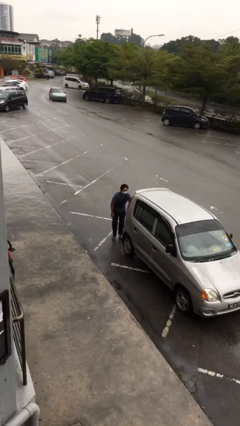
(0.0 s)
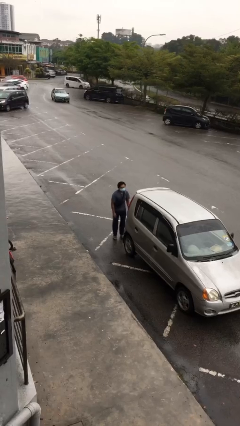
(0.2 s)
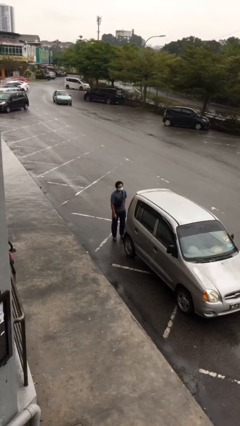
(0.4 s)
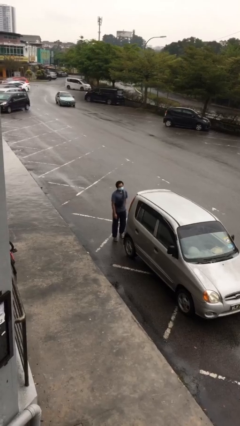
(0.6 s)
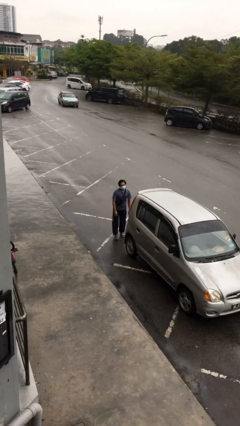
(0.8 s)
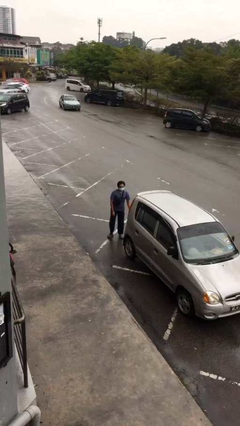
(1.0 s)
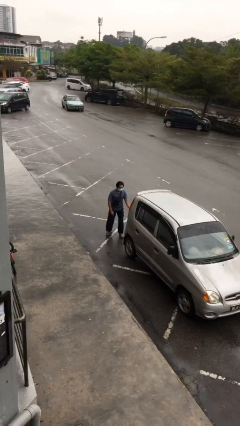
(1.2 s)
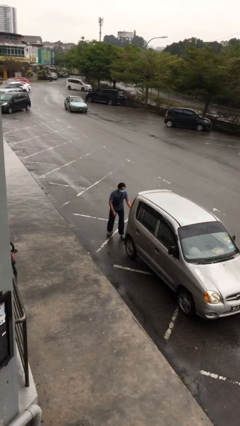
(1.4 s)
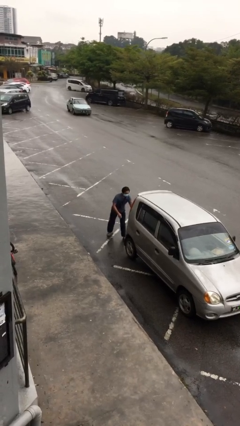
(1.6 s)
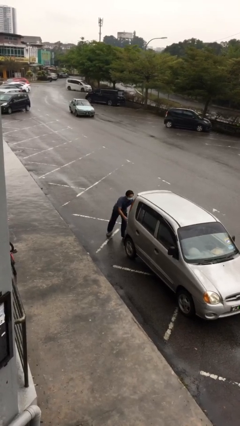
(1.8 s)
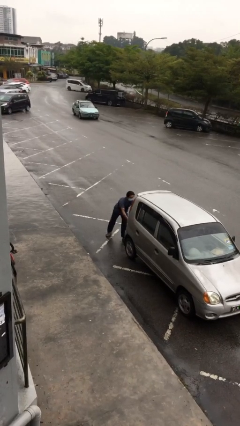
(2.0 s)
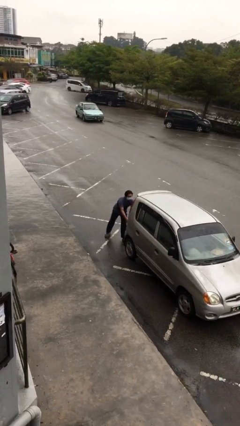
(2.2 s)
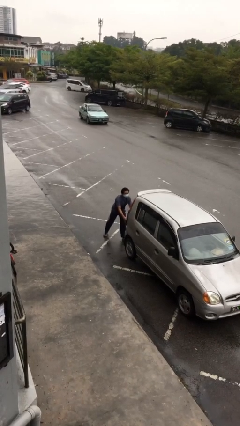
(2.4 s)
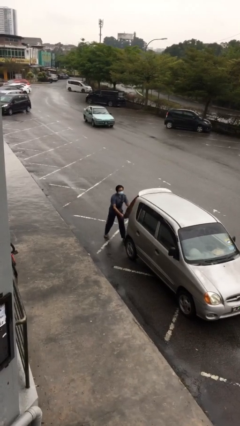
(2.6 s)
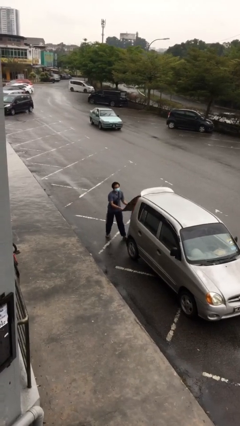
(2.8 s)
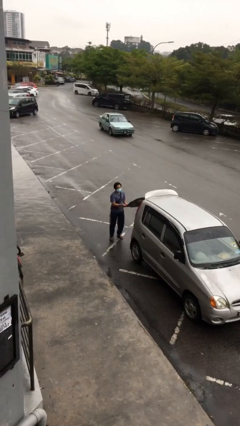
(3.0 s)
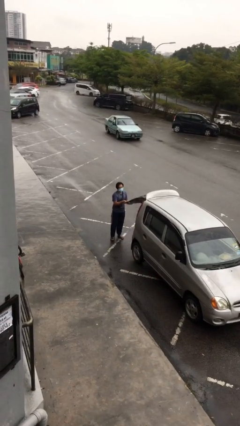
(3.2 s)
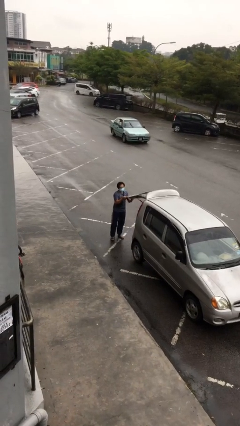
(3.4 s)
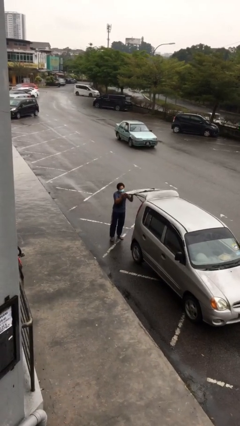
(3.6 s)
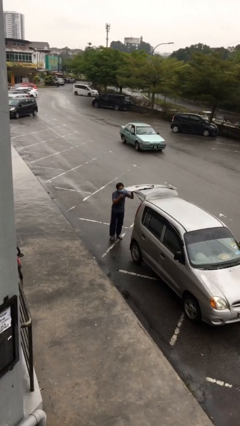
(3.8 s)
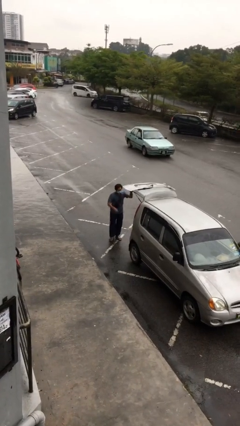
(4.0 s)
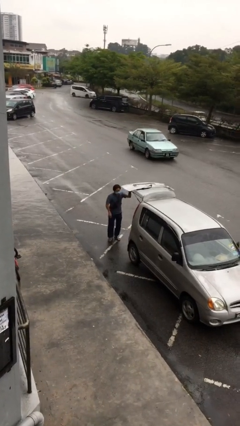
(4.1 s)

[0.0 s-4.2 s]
person opens car trunk

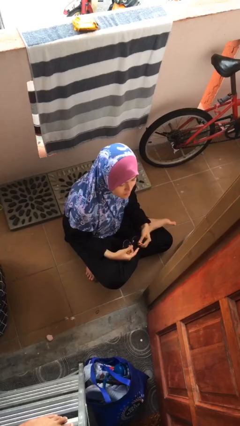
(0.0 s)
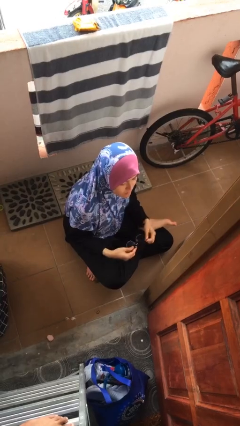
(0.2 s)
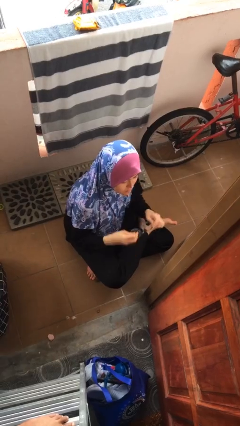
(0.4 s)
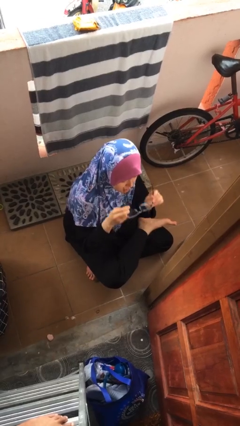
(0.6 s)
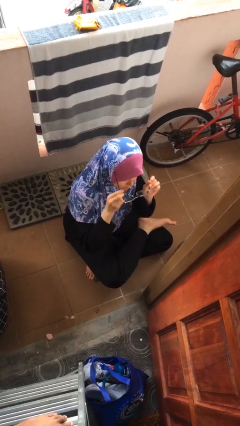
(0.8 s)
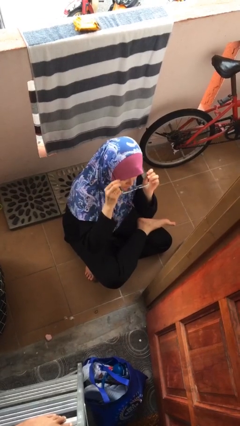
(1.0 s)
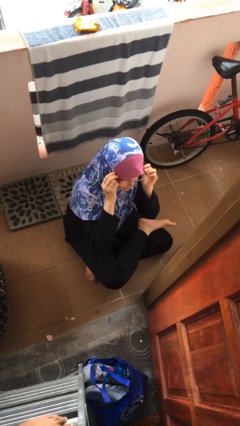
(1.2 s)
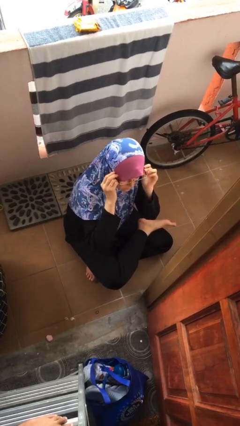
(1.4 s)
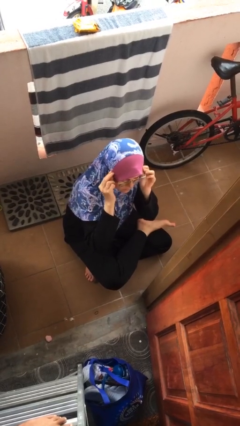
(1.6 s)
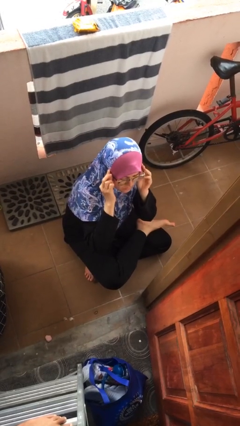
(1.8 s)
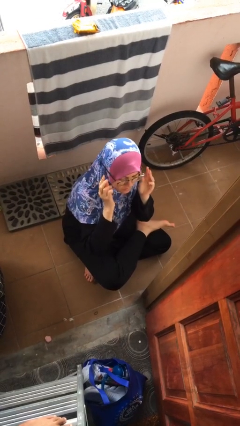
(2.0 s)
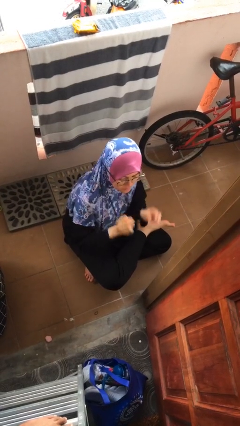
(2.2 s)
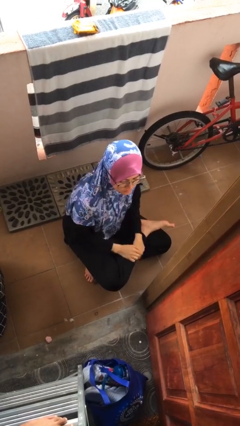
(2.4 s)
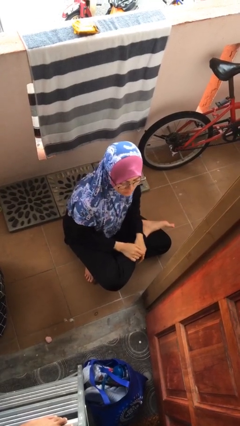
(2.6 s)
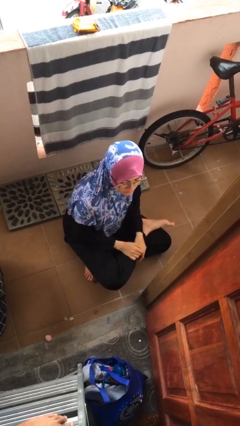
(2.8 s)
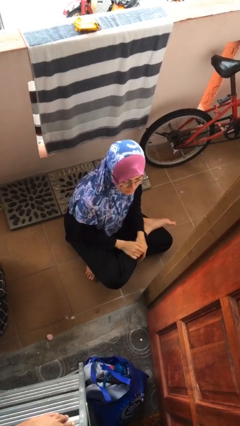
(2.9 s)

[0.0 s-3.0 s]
person puts on glasses

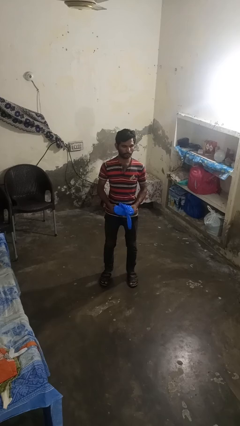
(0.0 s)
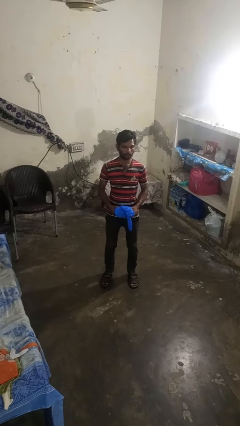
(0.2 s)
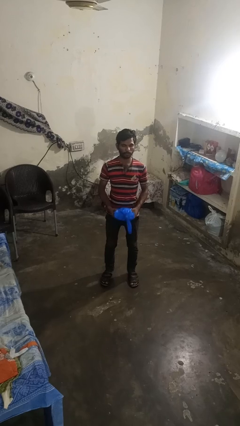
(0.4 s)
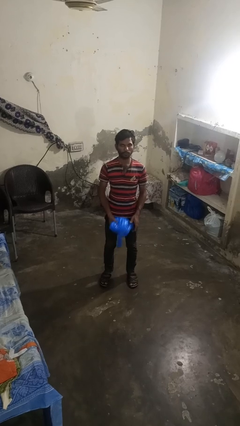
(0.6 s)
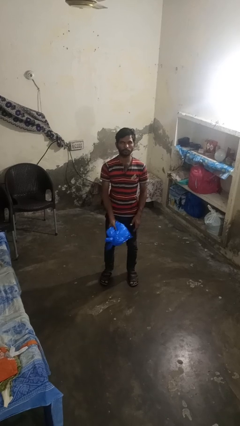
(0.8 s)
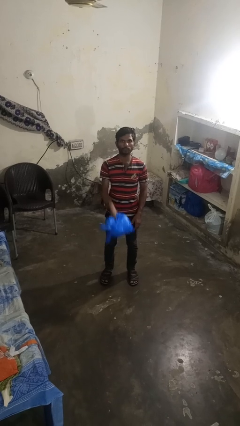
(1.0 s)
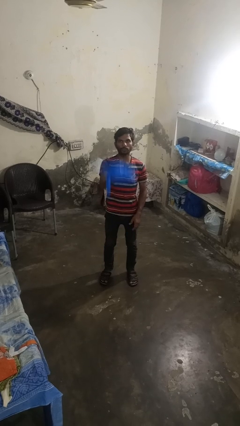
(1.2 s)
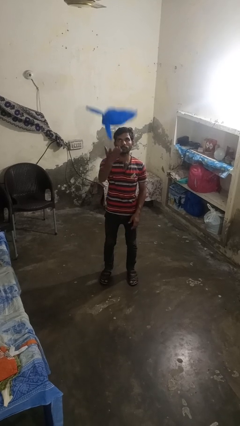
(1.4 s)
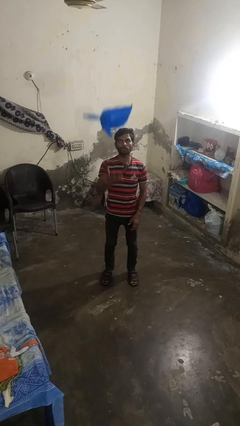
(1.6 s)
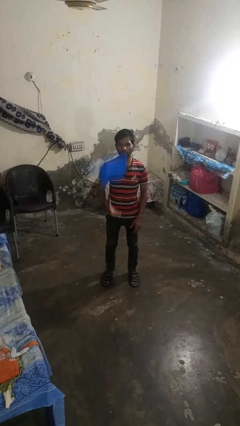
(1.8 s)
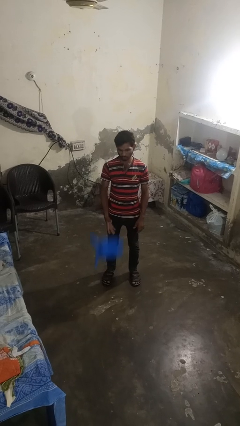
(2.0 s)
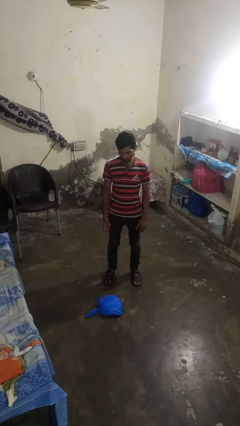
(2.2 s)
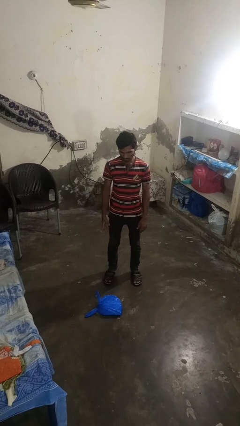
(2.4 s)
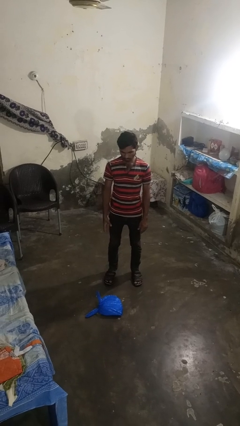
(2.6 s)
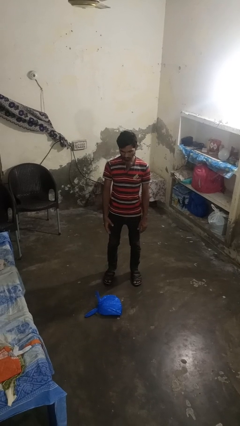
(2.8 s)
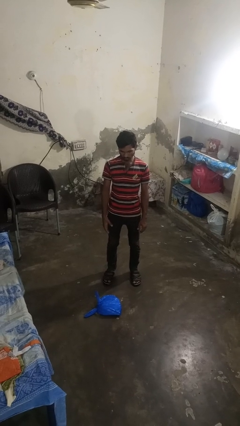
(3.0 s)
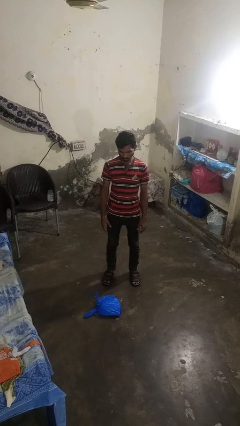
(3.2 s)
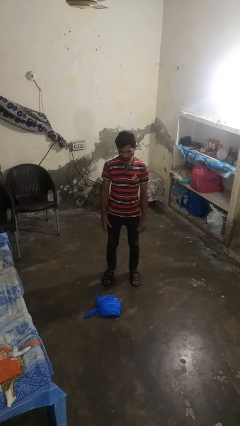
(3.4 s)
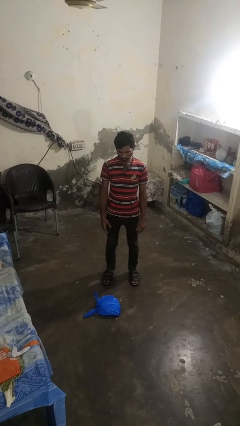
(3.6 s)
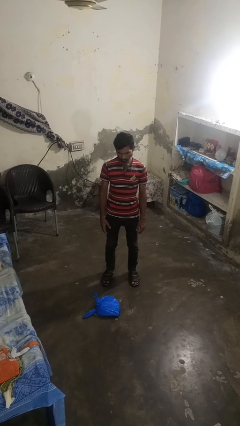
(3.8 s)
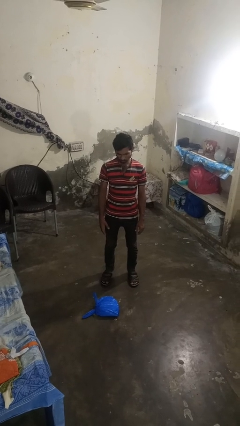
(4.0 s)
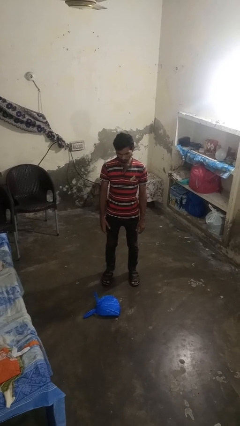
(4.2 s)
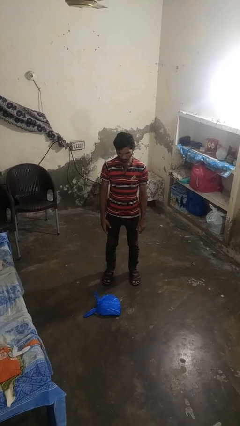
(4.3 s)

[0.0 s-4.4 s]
person throws object into air

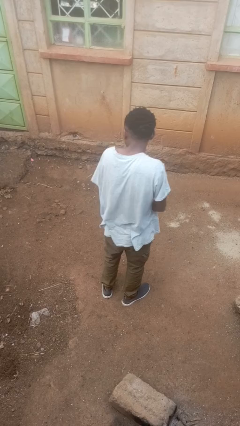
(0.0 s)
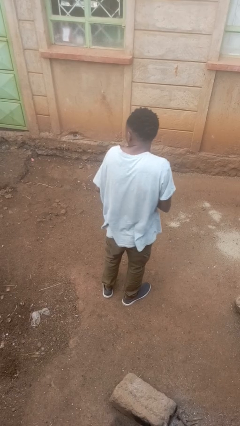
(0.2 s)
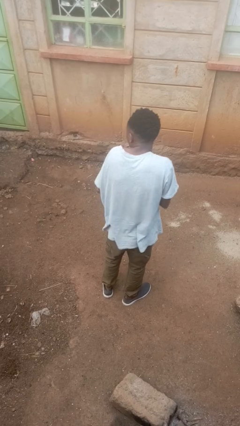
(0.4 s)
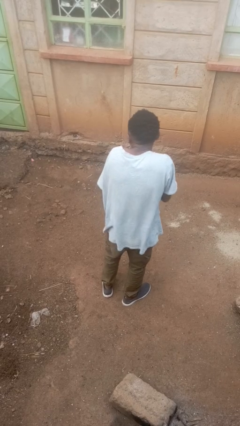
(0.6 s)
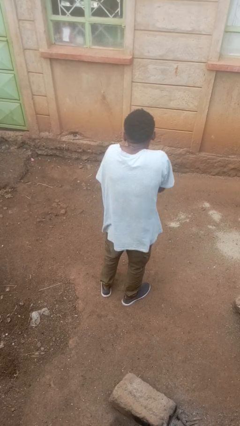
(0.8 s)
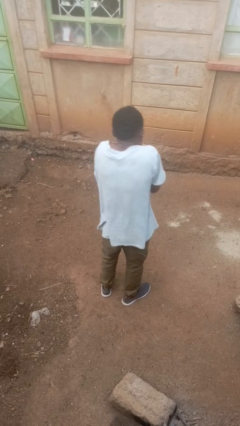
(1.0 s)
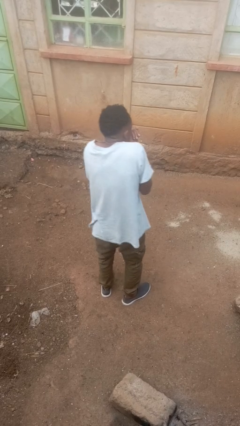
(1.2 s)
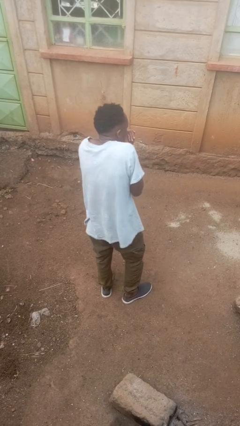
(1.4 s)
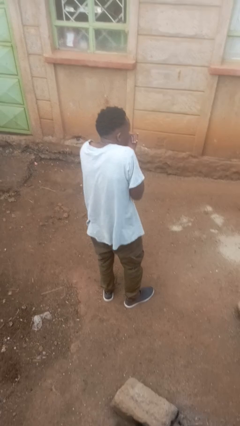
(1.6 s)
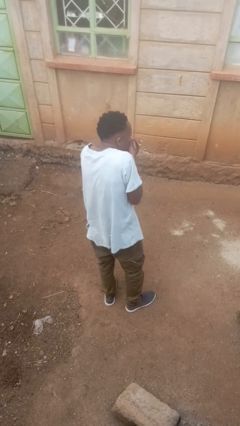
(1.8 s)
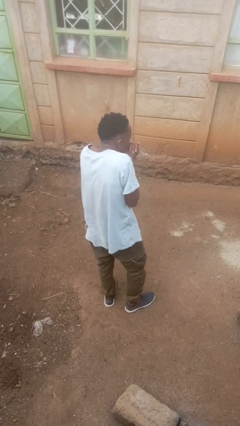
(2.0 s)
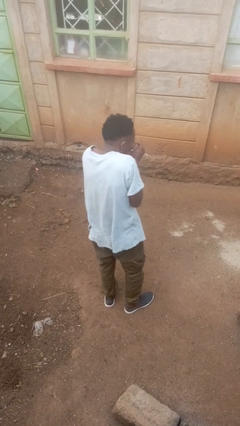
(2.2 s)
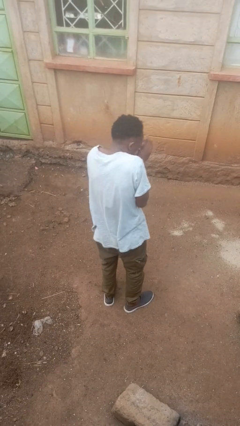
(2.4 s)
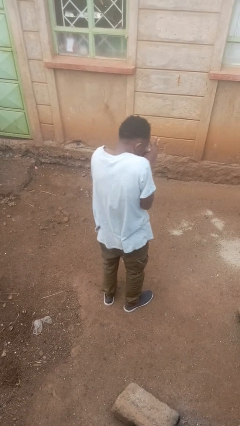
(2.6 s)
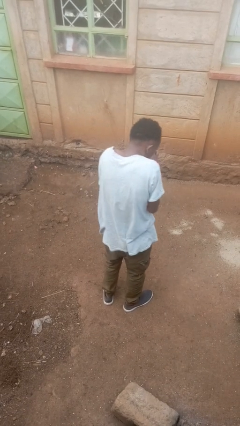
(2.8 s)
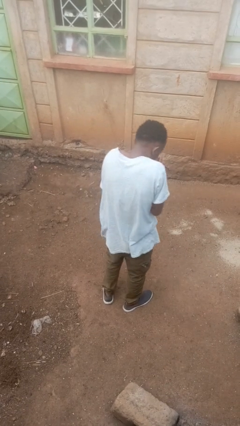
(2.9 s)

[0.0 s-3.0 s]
person blows into hands

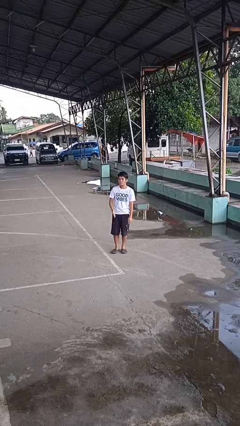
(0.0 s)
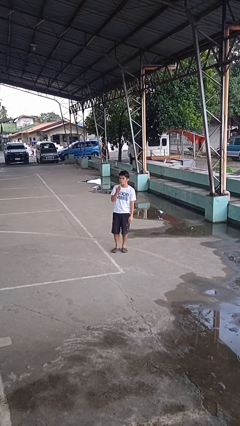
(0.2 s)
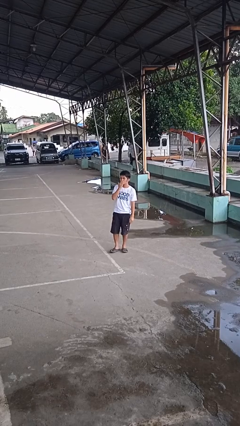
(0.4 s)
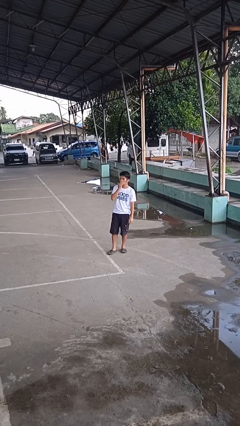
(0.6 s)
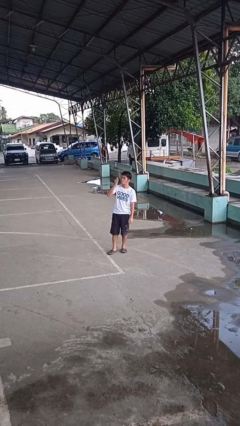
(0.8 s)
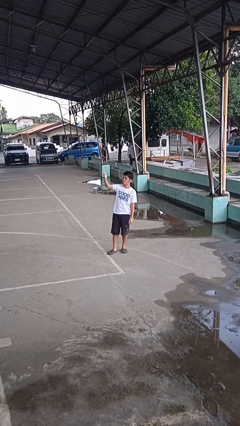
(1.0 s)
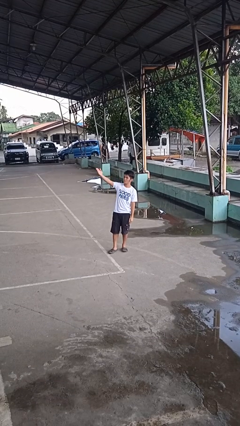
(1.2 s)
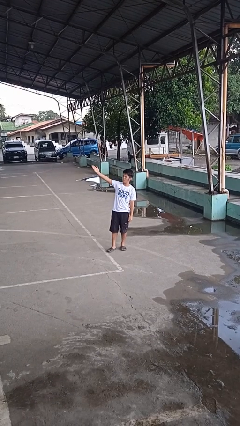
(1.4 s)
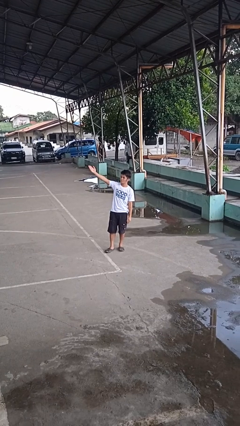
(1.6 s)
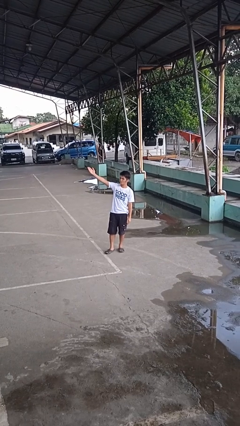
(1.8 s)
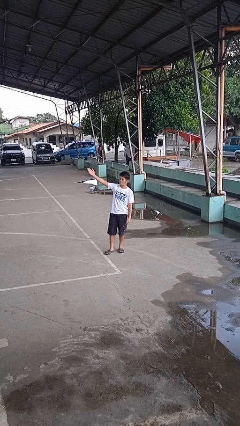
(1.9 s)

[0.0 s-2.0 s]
person gestures blow kiss

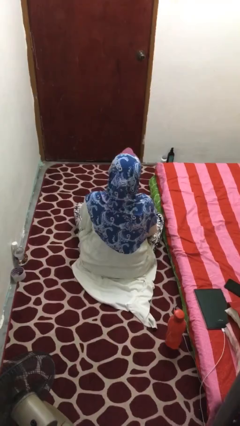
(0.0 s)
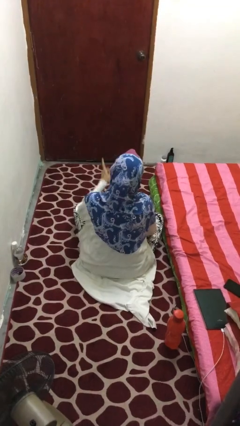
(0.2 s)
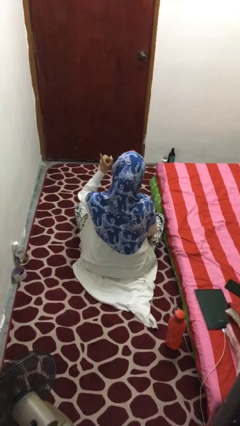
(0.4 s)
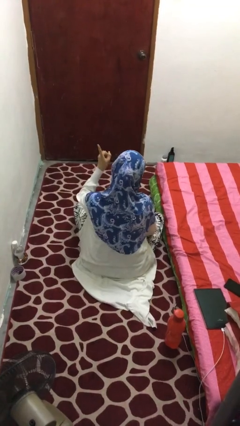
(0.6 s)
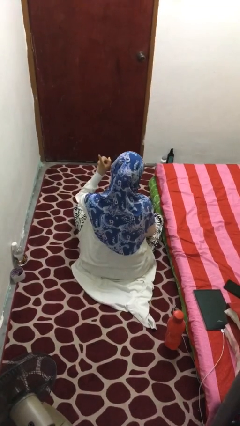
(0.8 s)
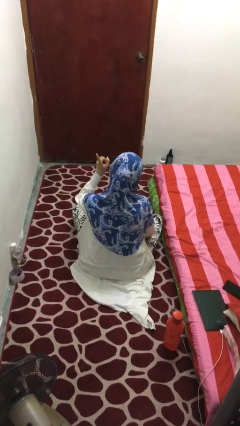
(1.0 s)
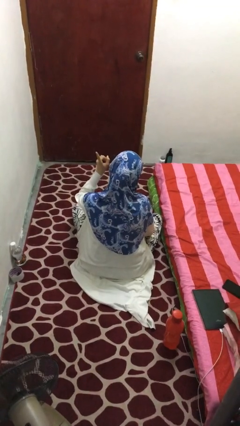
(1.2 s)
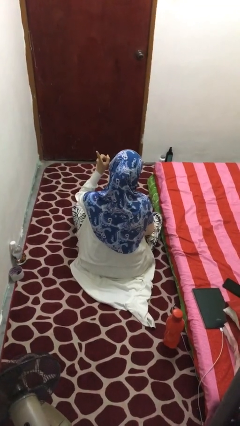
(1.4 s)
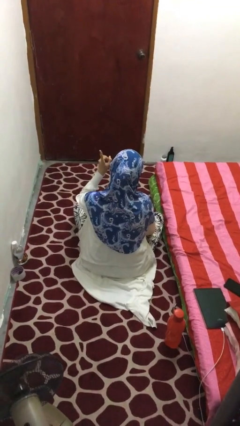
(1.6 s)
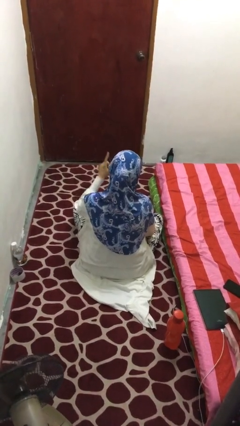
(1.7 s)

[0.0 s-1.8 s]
person gestures number one
